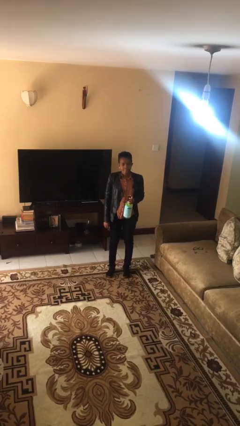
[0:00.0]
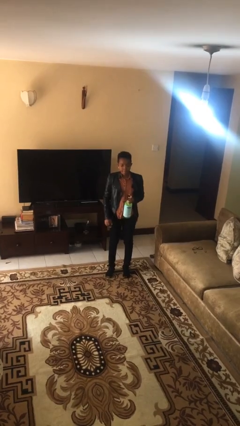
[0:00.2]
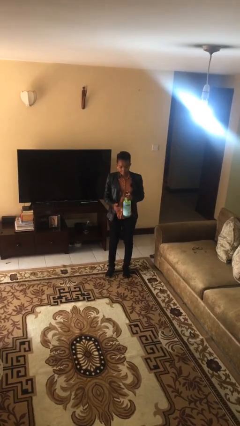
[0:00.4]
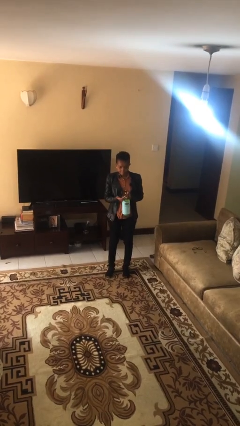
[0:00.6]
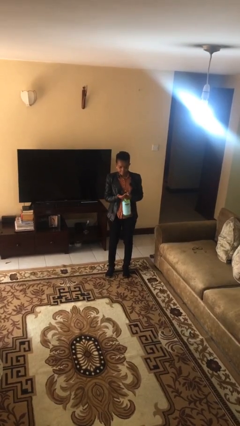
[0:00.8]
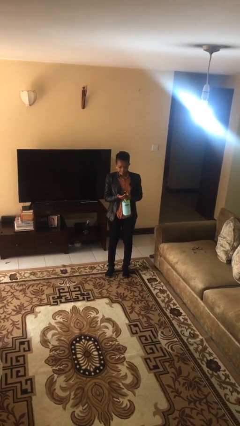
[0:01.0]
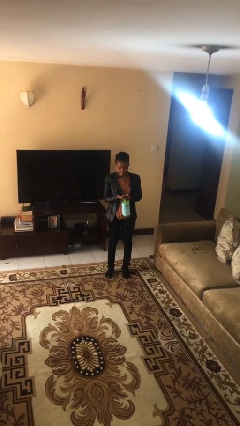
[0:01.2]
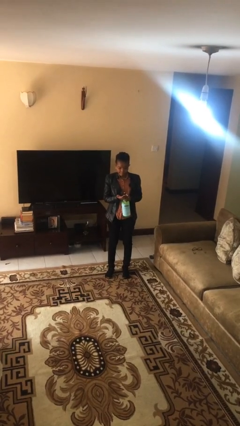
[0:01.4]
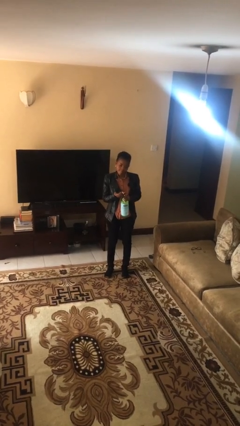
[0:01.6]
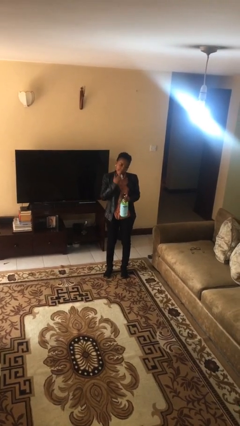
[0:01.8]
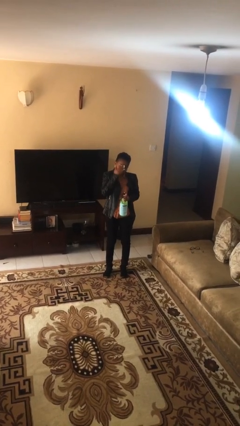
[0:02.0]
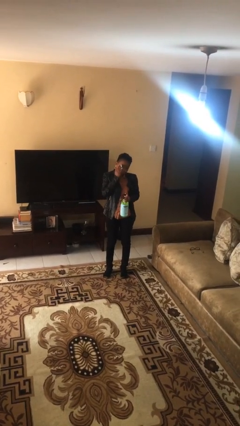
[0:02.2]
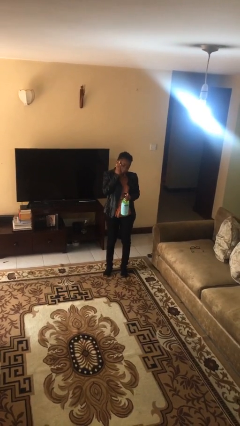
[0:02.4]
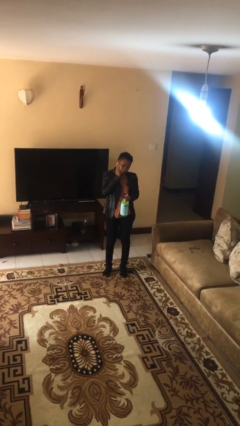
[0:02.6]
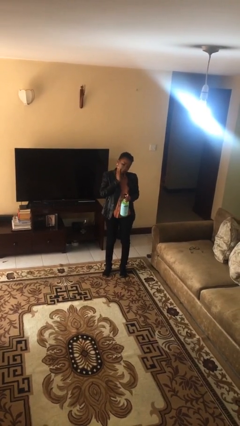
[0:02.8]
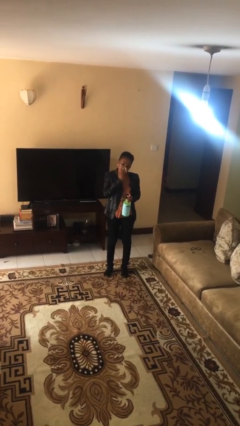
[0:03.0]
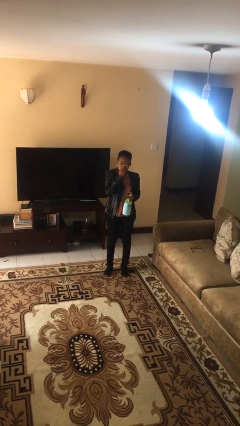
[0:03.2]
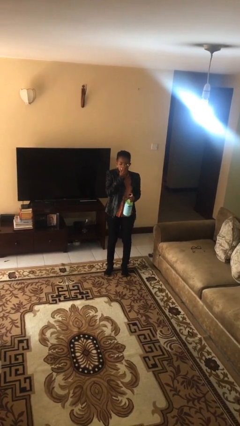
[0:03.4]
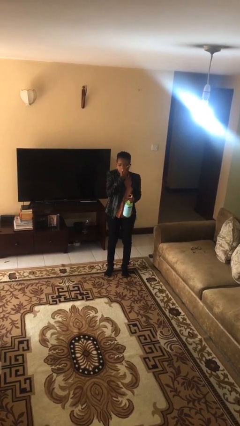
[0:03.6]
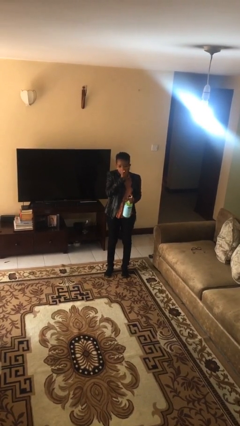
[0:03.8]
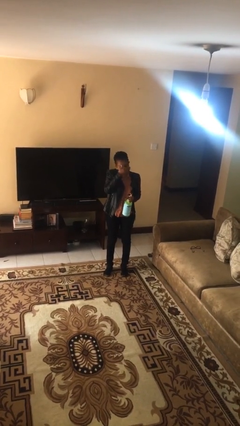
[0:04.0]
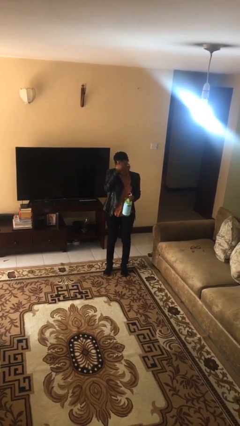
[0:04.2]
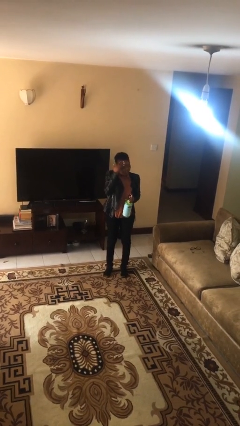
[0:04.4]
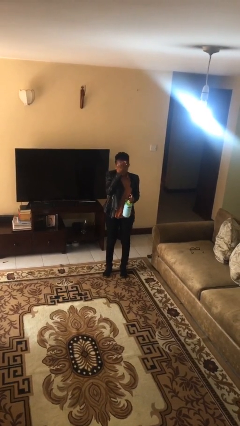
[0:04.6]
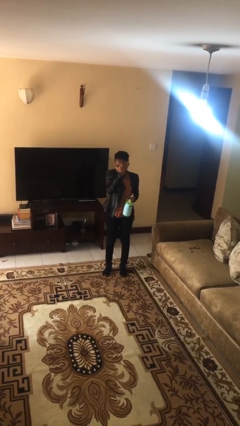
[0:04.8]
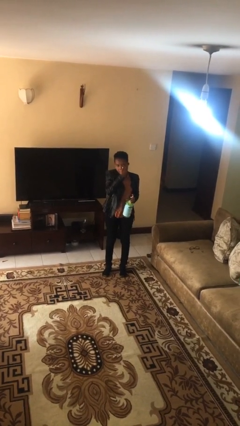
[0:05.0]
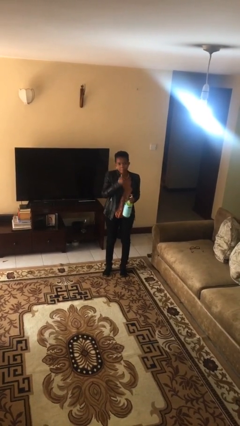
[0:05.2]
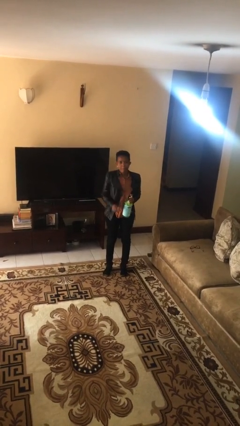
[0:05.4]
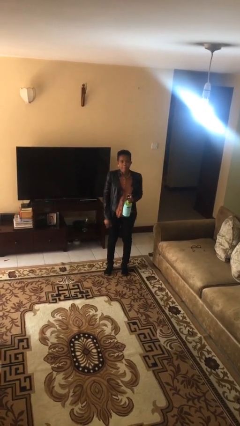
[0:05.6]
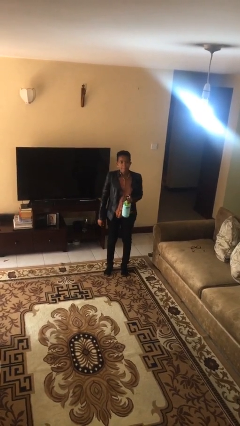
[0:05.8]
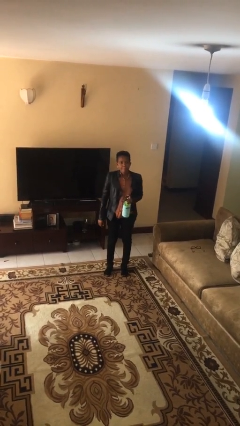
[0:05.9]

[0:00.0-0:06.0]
person applies facial moisturizer

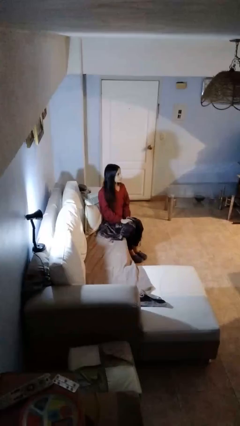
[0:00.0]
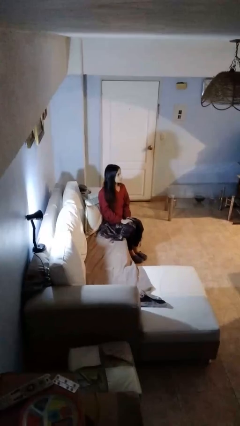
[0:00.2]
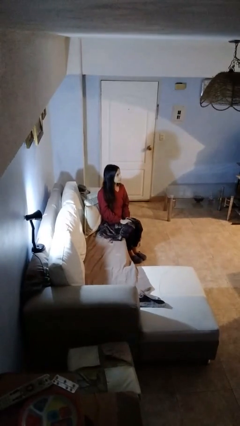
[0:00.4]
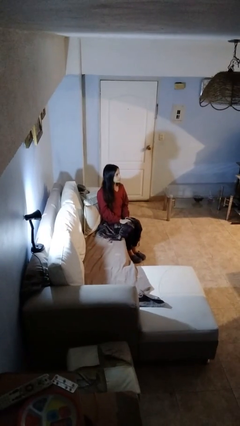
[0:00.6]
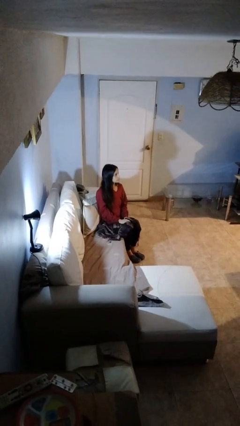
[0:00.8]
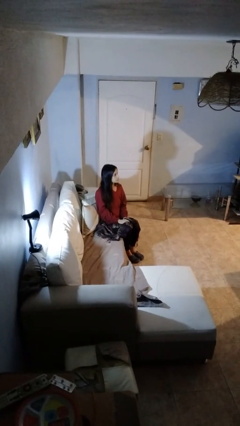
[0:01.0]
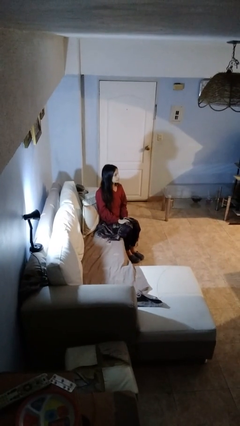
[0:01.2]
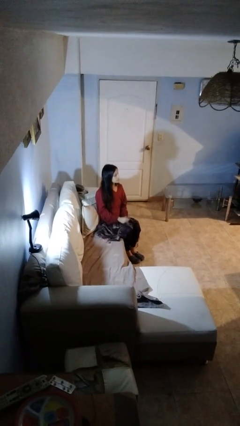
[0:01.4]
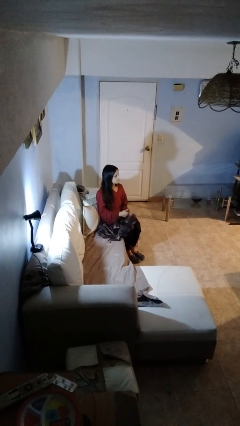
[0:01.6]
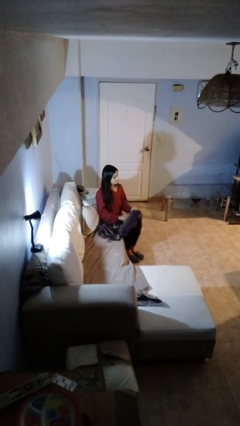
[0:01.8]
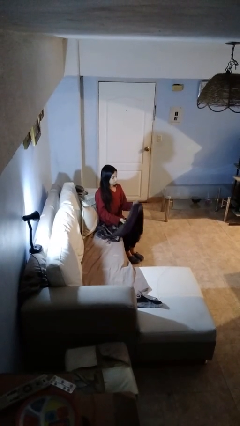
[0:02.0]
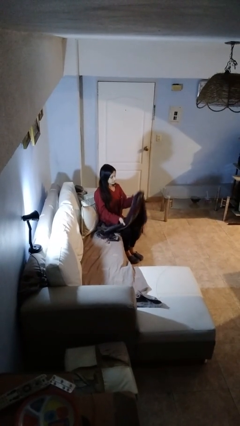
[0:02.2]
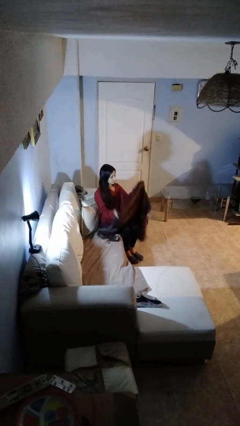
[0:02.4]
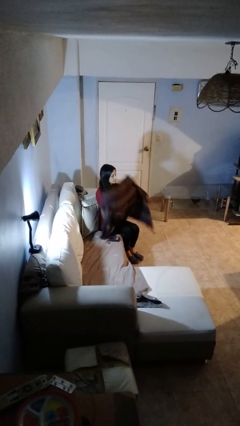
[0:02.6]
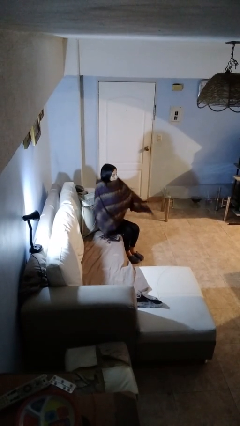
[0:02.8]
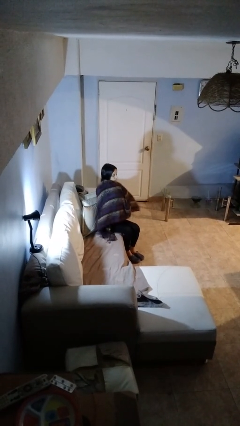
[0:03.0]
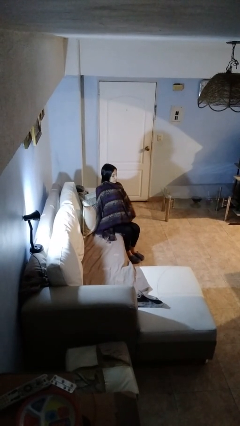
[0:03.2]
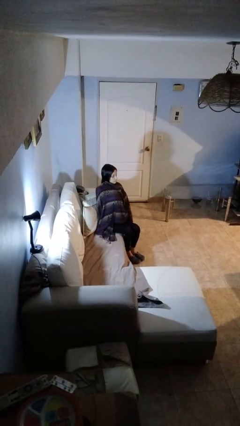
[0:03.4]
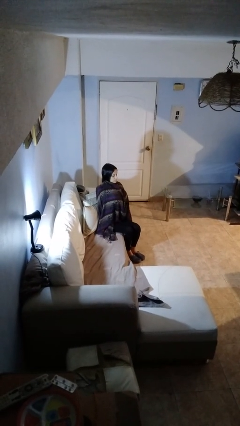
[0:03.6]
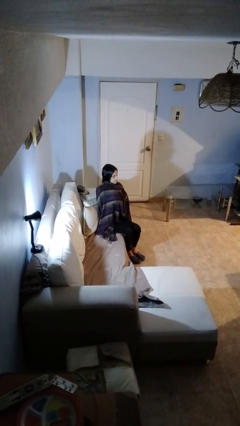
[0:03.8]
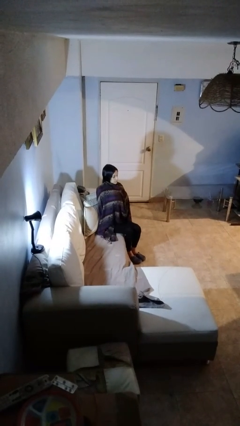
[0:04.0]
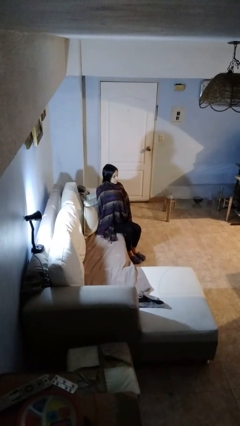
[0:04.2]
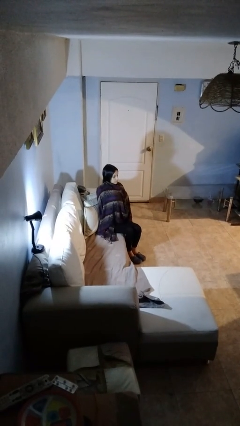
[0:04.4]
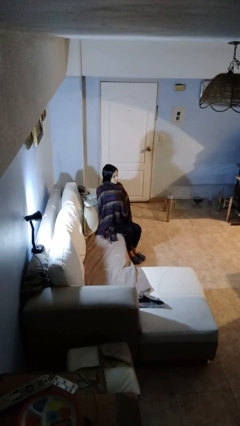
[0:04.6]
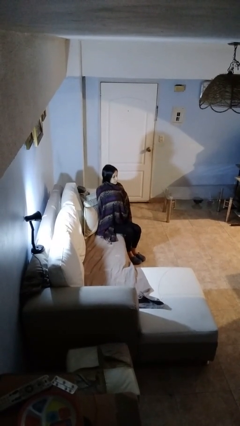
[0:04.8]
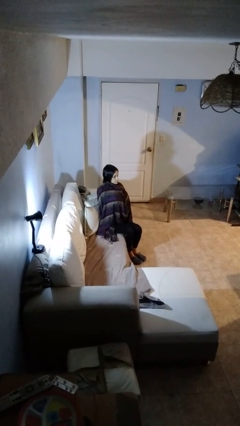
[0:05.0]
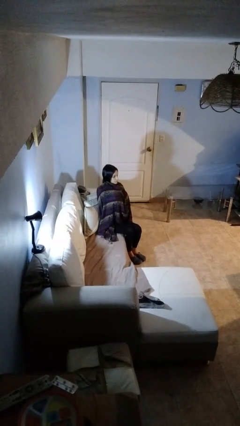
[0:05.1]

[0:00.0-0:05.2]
person covers with blanket

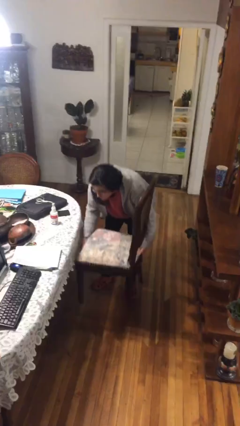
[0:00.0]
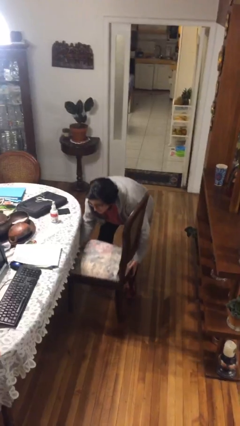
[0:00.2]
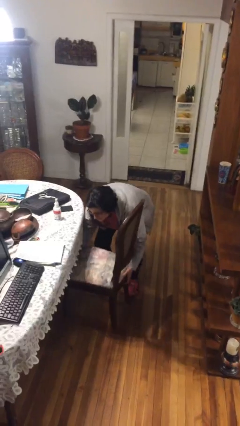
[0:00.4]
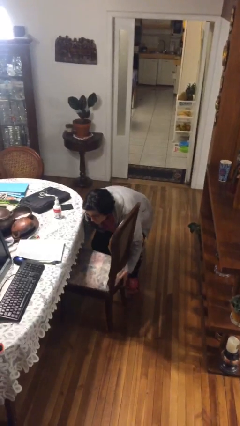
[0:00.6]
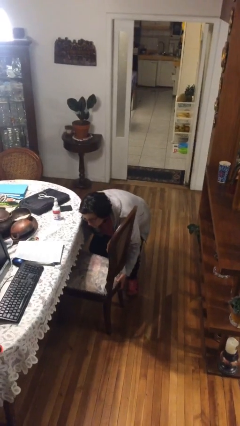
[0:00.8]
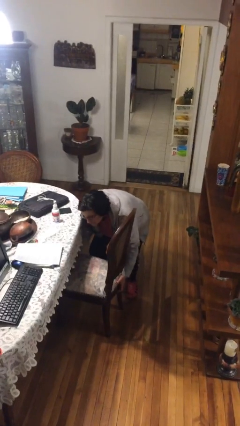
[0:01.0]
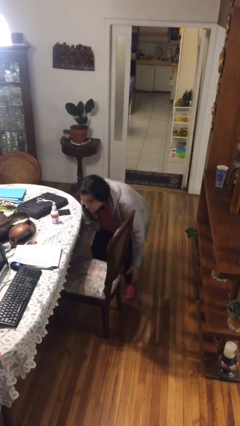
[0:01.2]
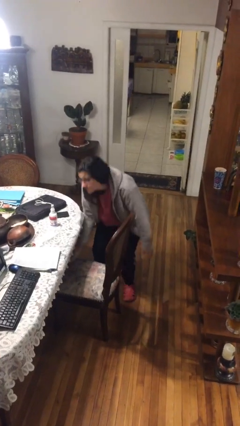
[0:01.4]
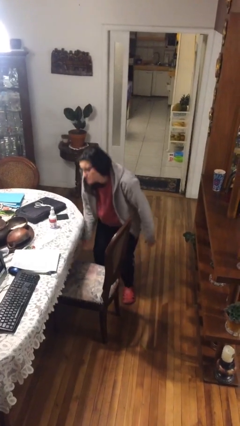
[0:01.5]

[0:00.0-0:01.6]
person puts down object on floor

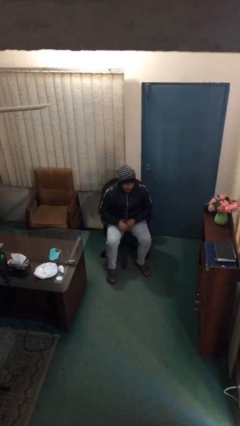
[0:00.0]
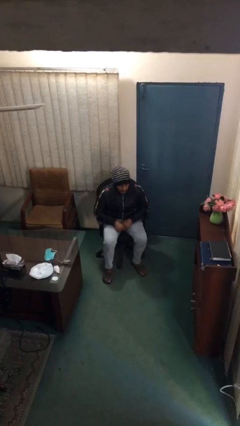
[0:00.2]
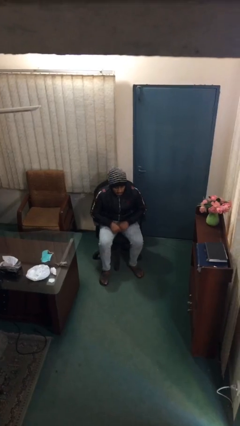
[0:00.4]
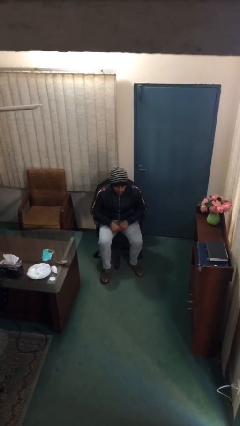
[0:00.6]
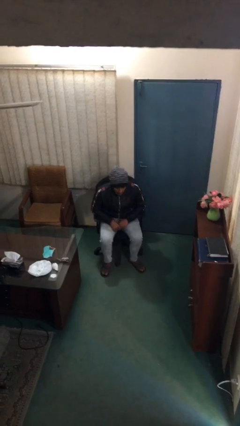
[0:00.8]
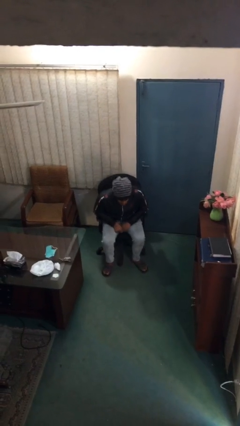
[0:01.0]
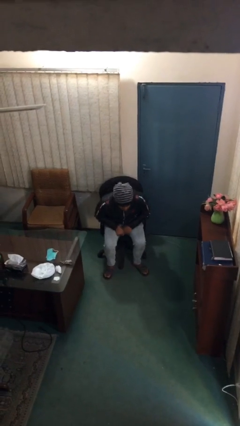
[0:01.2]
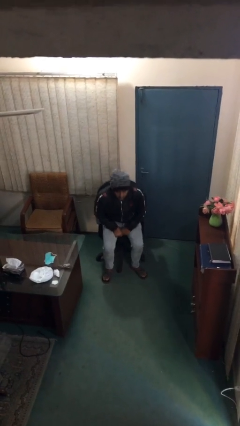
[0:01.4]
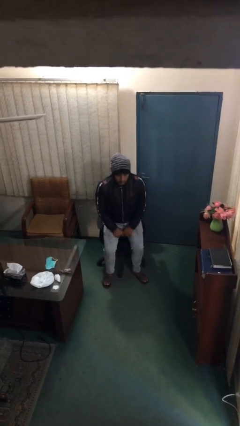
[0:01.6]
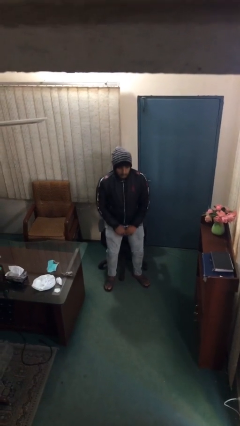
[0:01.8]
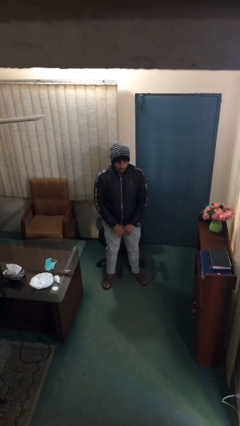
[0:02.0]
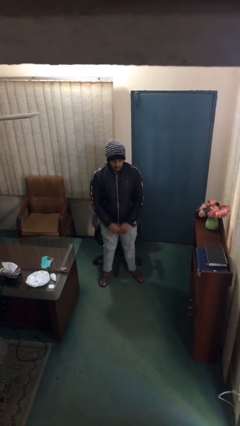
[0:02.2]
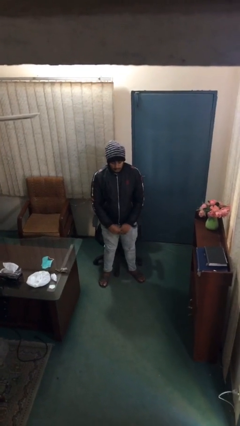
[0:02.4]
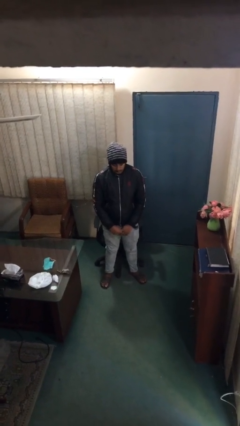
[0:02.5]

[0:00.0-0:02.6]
person stands up

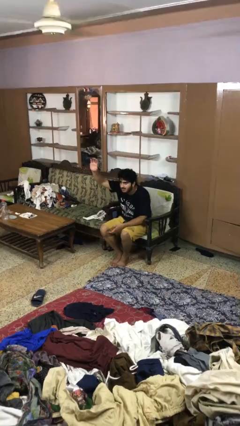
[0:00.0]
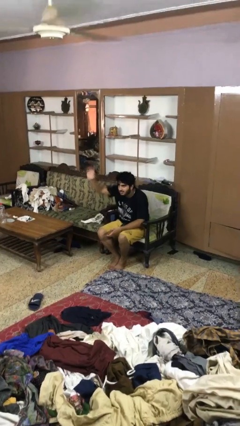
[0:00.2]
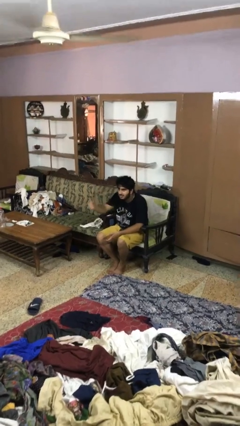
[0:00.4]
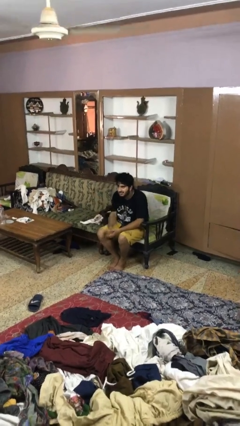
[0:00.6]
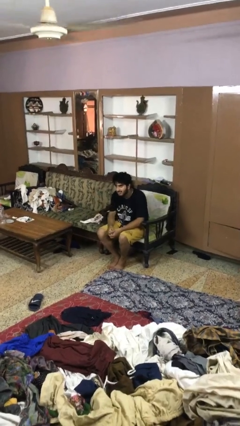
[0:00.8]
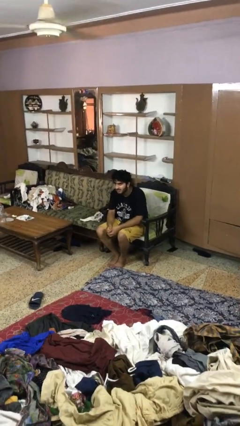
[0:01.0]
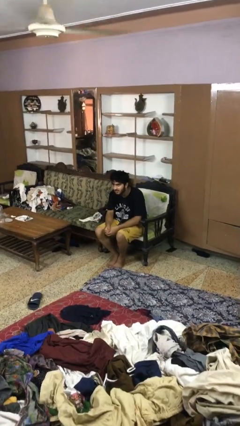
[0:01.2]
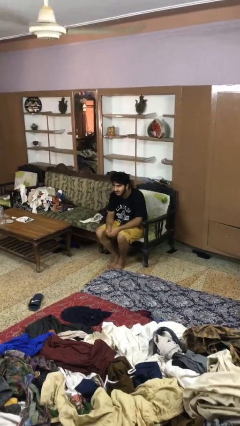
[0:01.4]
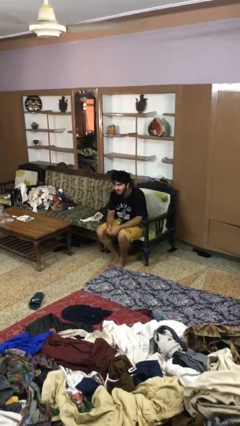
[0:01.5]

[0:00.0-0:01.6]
person gestures lower hand

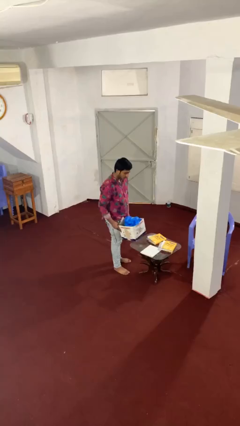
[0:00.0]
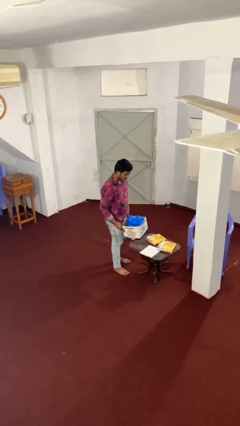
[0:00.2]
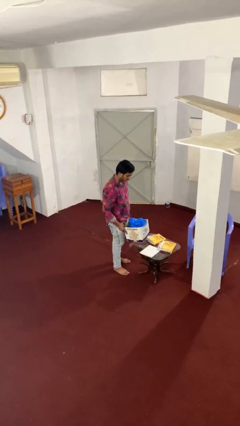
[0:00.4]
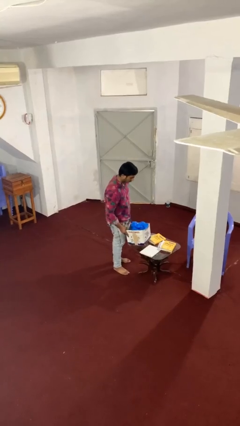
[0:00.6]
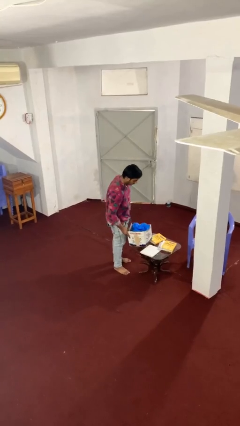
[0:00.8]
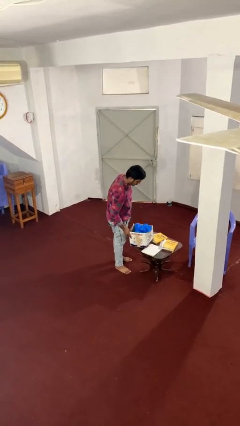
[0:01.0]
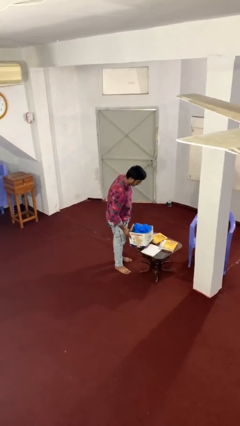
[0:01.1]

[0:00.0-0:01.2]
person puts down object on table
